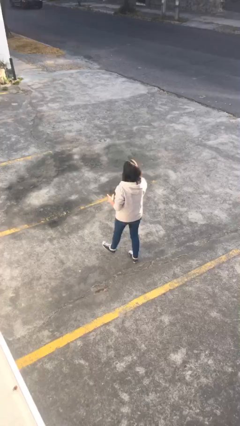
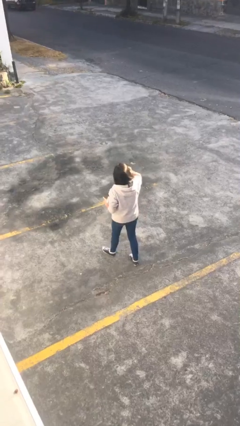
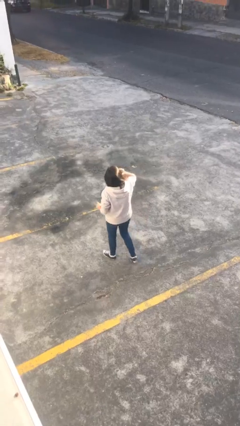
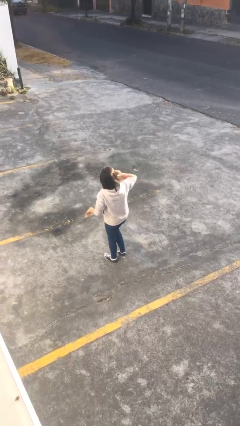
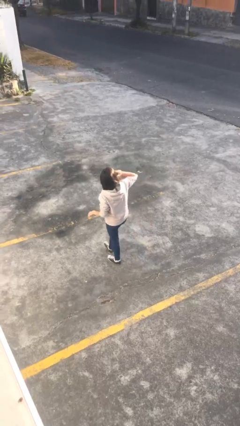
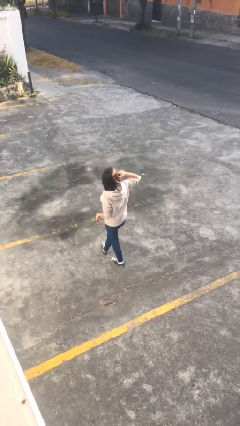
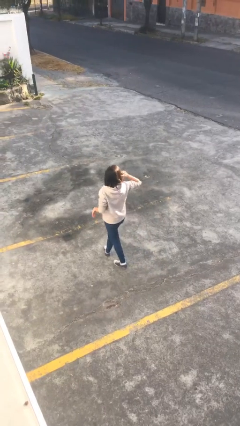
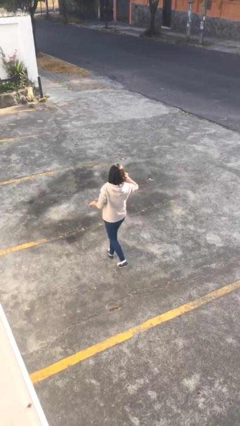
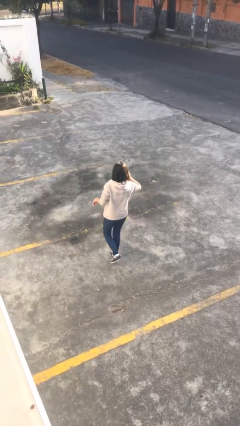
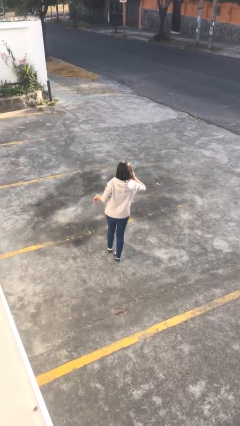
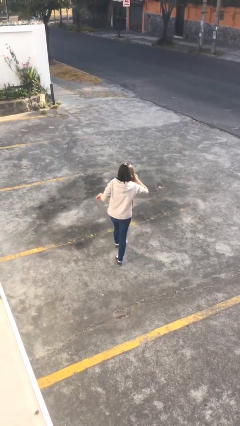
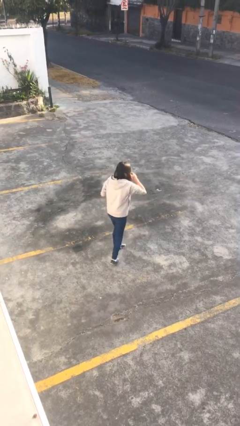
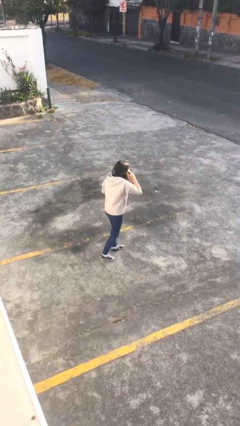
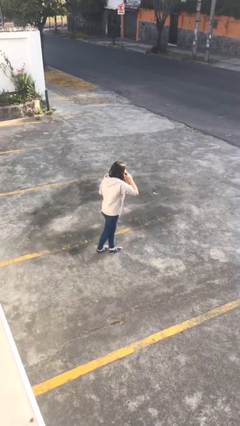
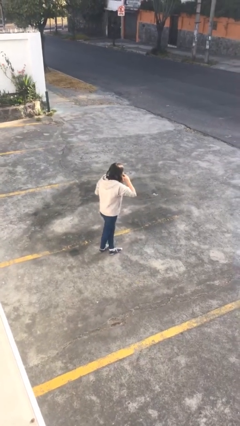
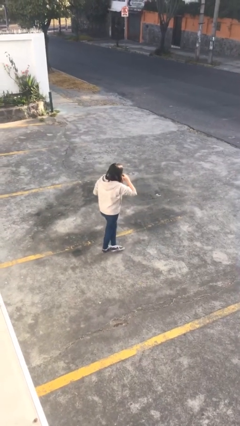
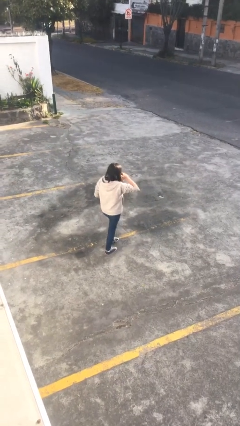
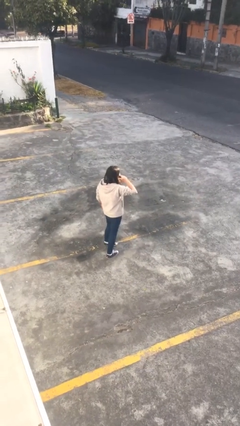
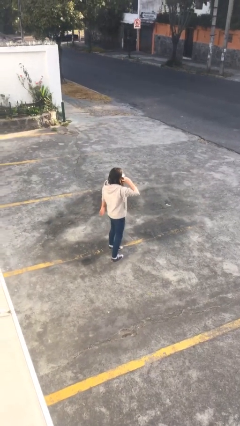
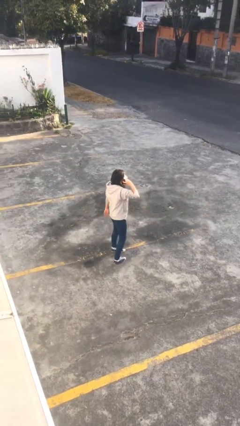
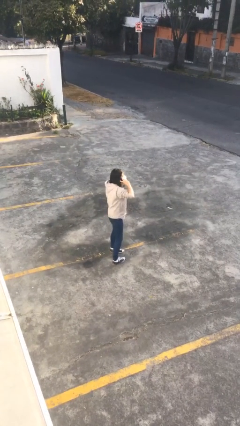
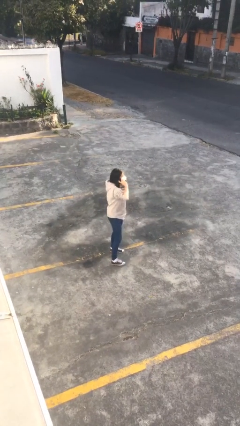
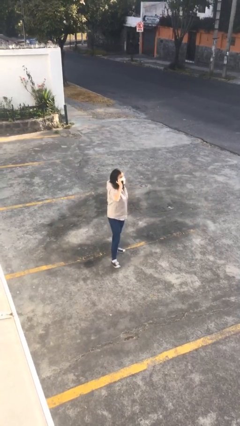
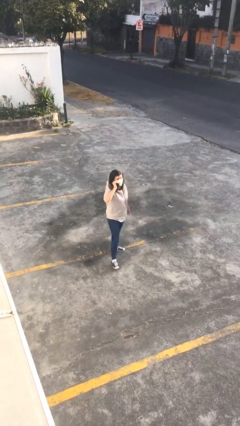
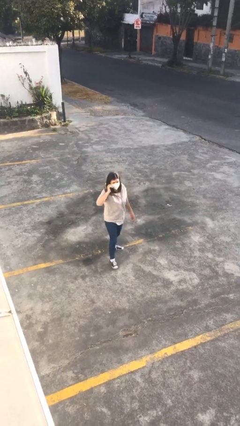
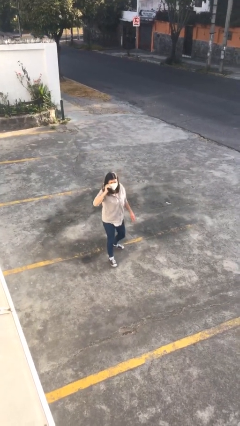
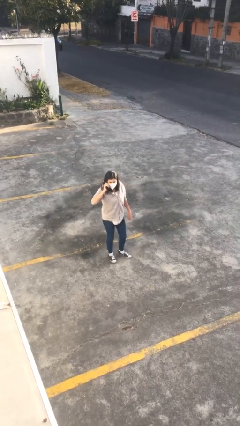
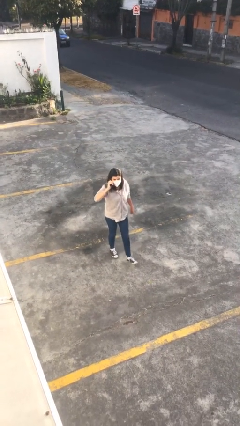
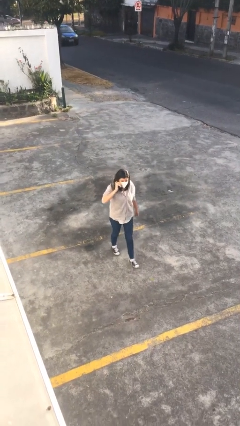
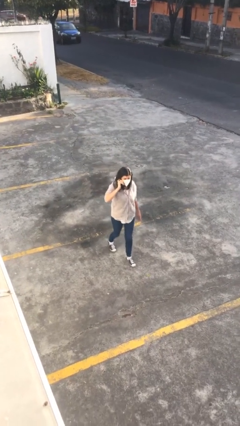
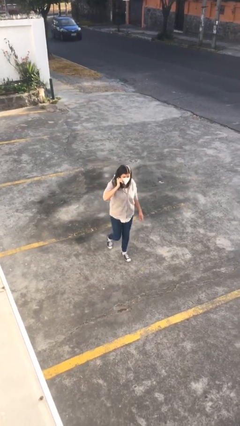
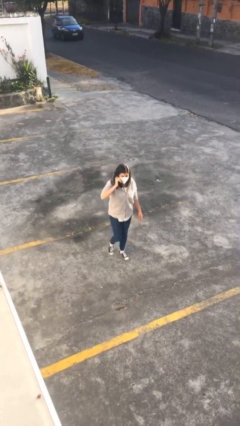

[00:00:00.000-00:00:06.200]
person talks on phone

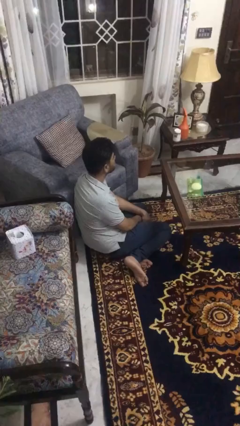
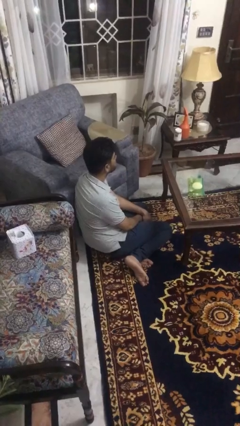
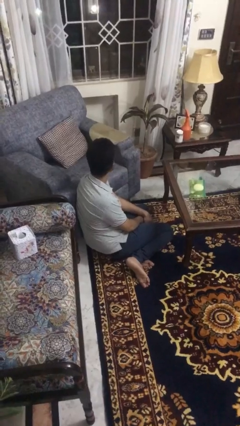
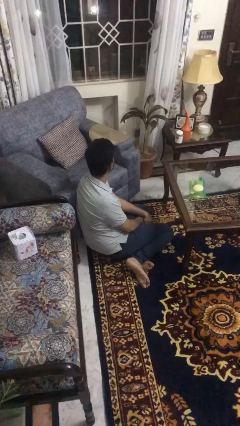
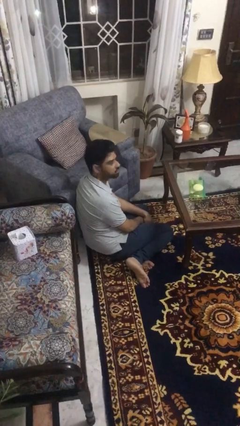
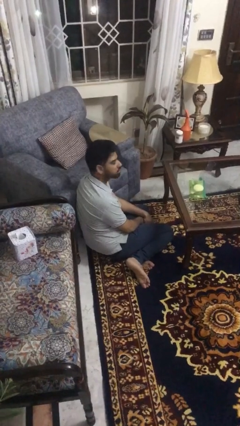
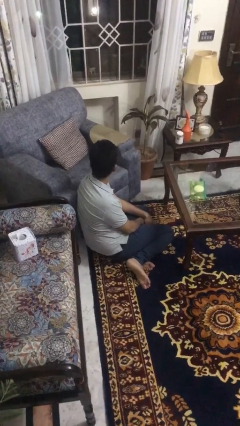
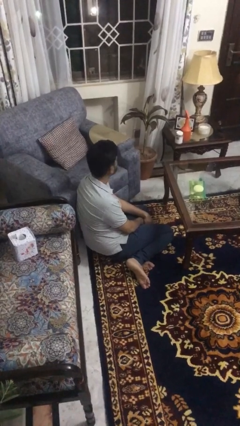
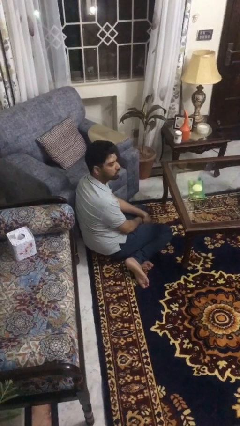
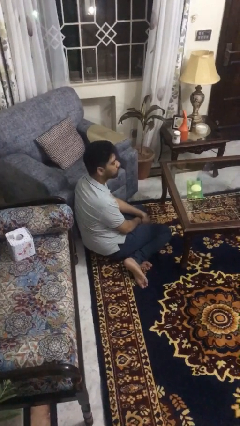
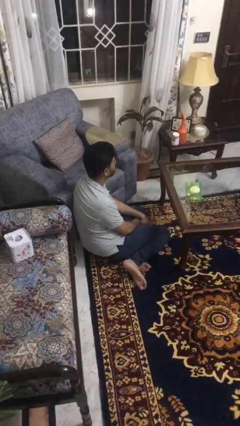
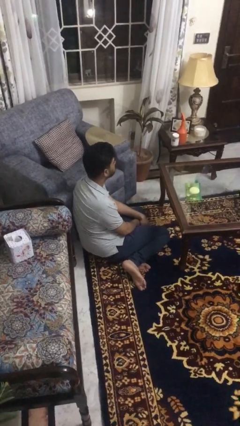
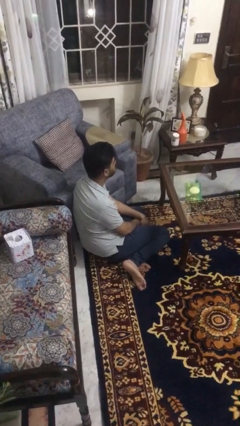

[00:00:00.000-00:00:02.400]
person shakes head

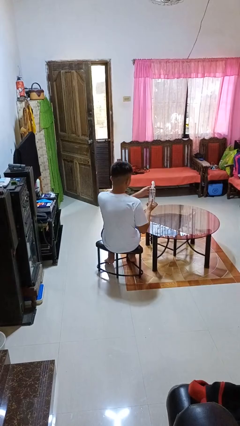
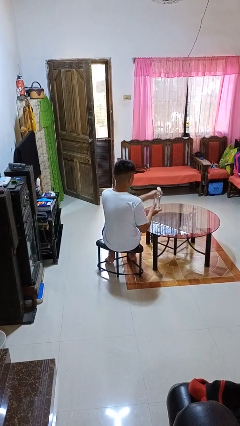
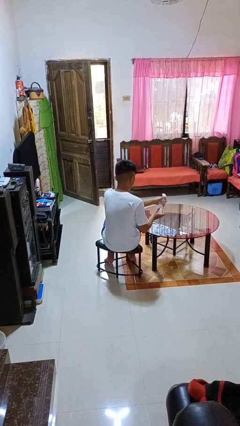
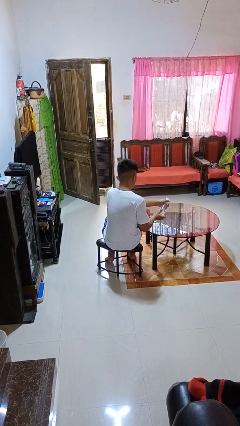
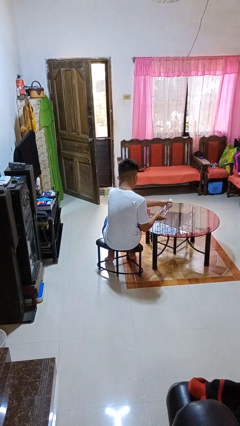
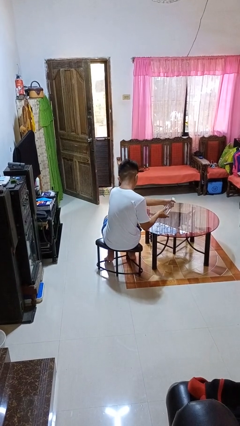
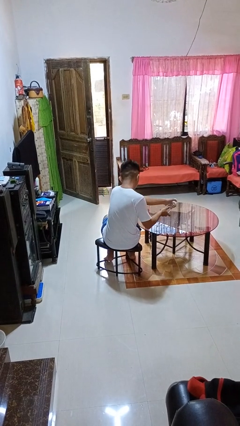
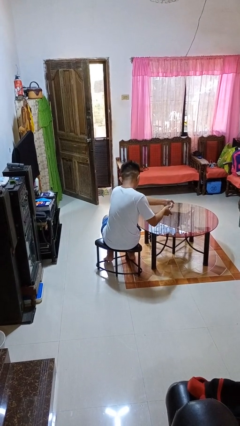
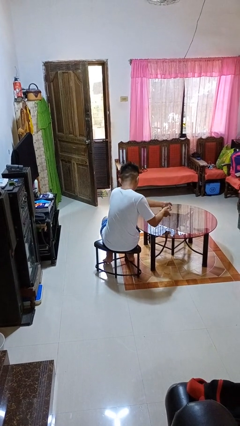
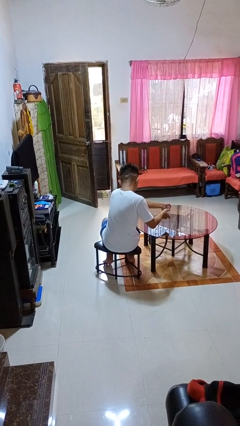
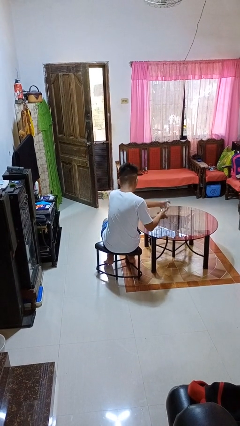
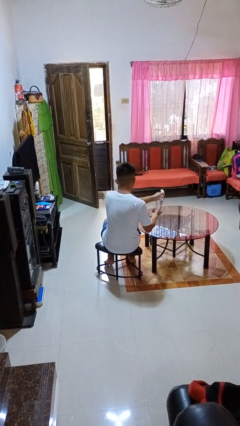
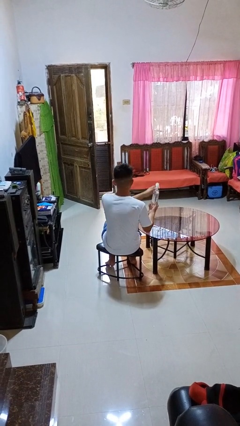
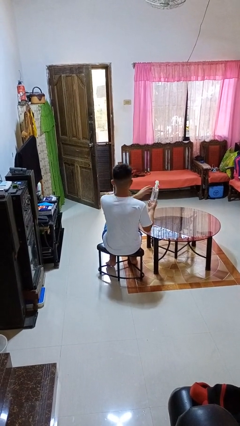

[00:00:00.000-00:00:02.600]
person sprays from bottle

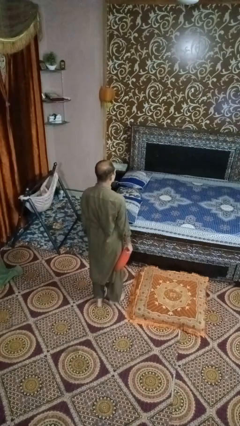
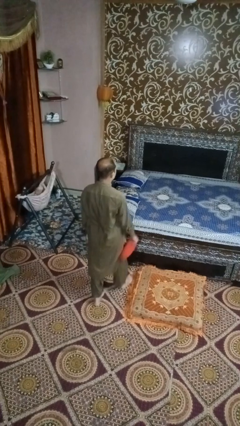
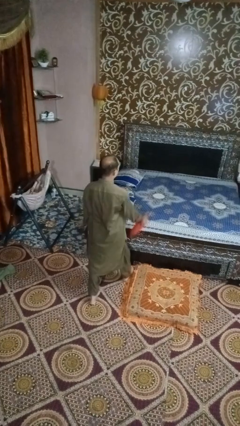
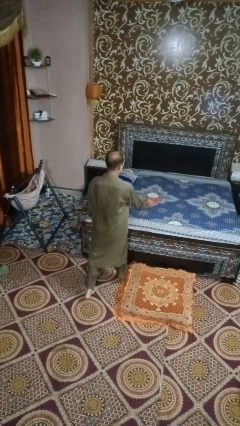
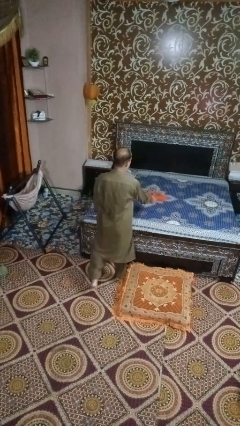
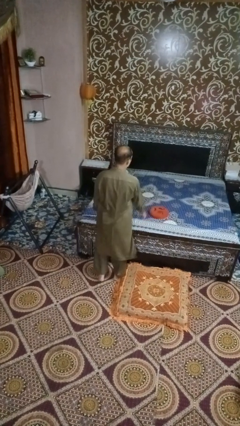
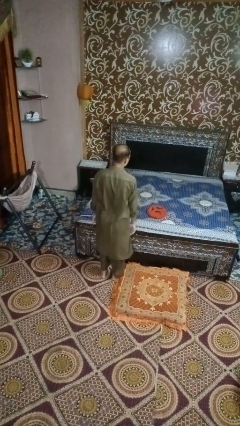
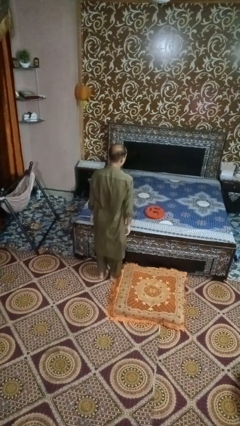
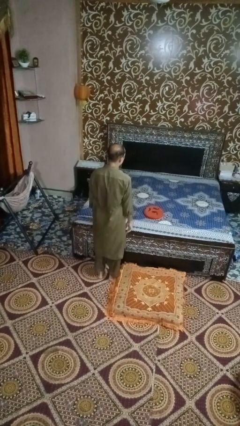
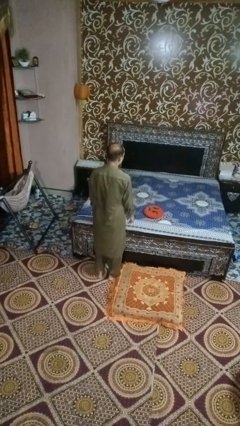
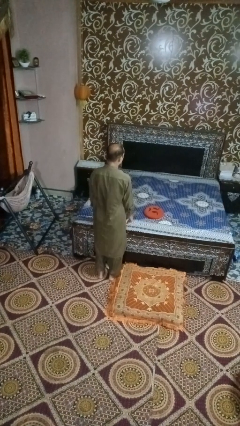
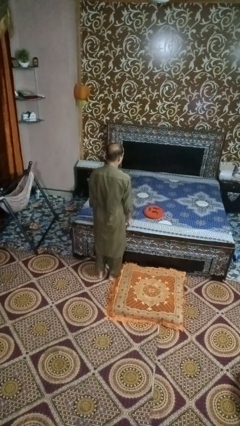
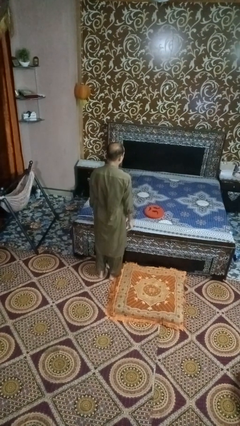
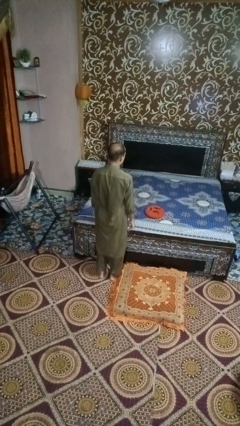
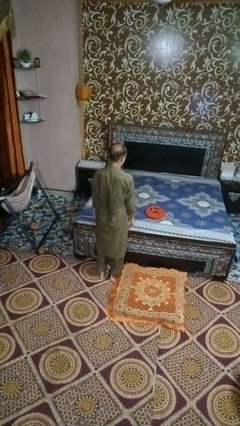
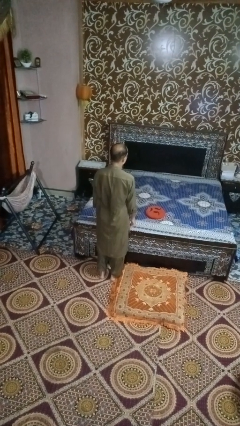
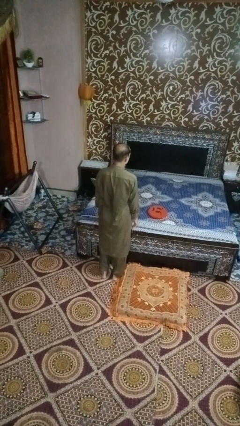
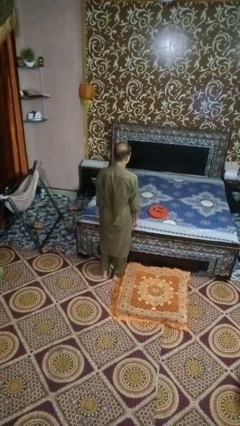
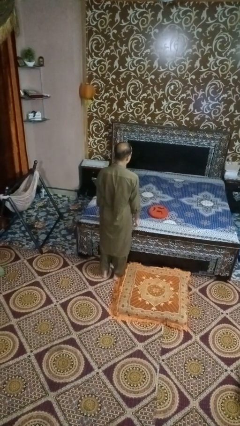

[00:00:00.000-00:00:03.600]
person throws object on bed

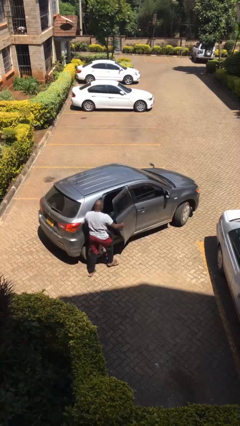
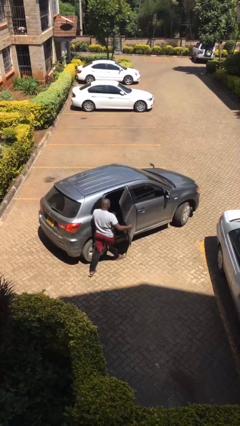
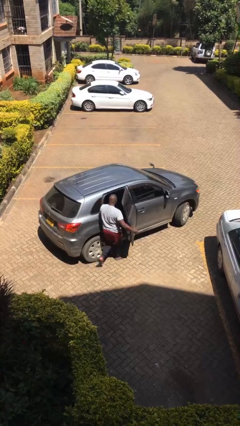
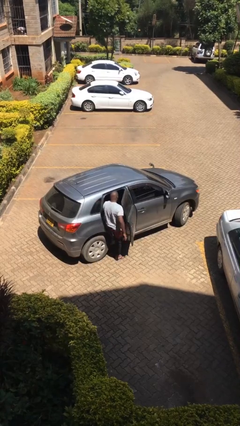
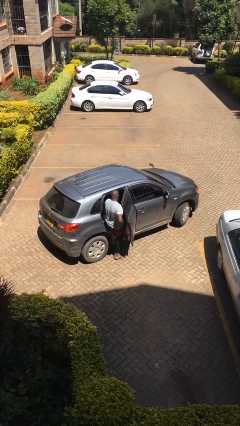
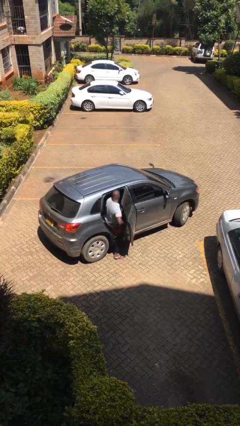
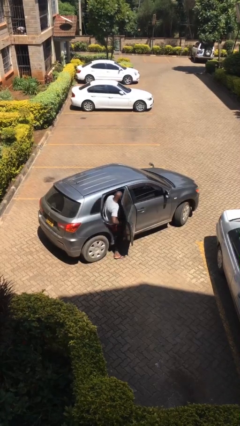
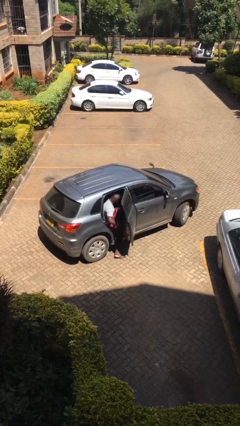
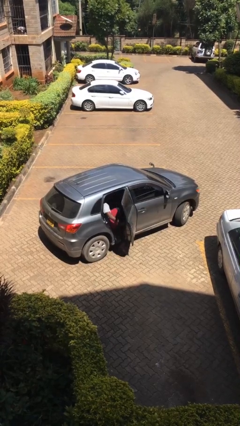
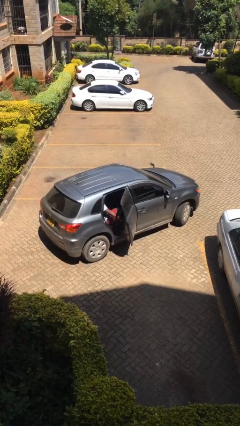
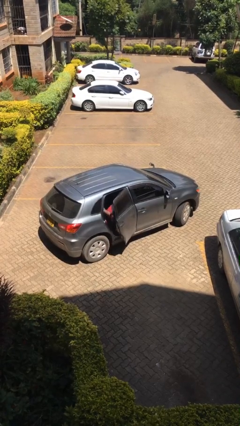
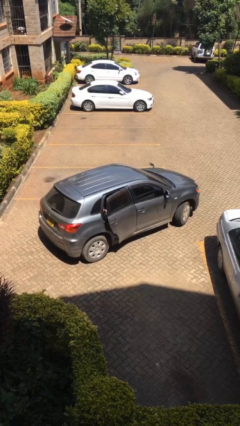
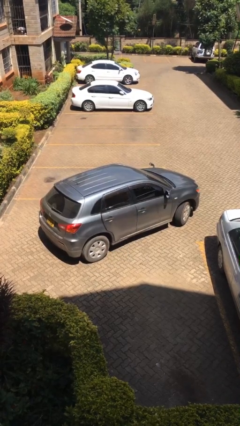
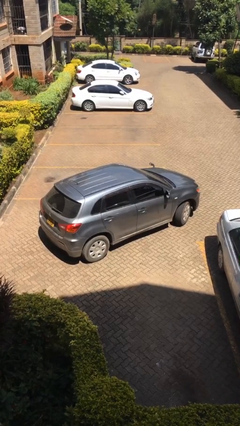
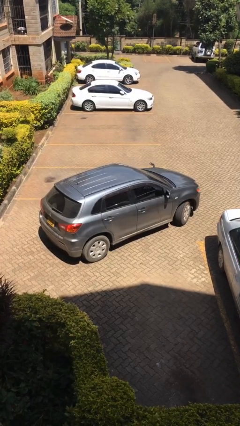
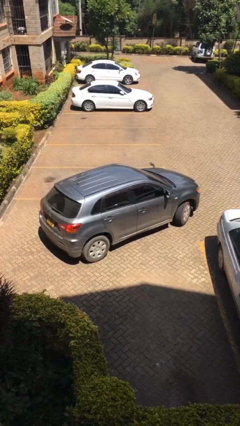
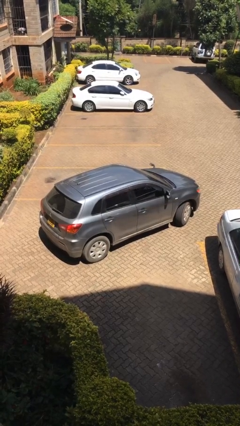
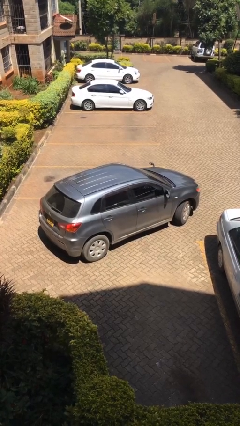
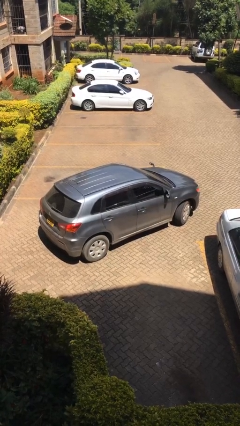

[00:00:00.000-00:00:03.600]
car picks up person
